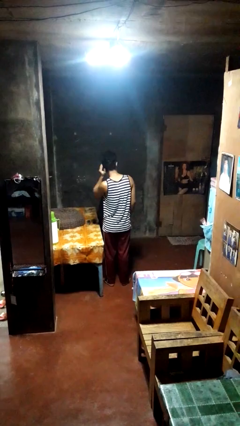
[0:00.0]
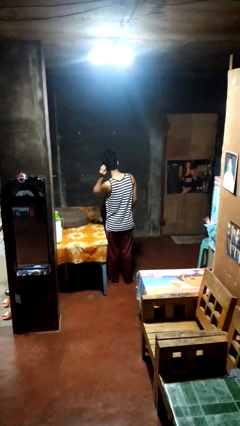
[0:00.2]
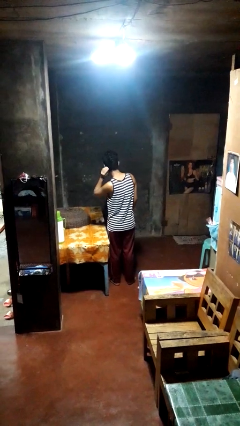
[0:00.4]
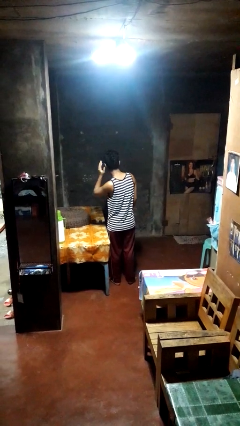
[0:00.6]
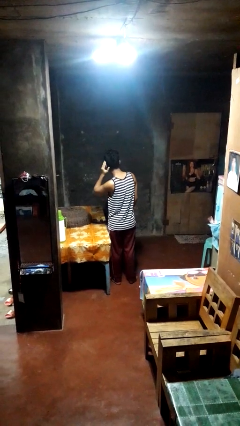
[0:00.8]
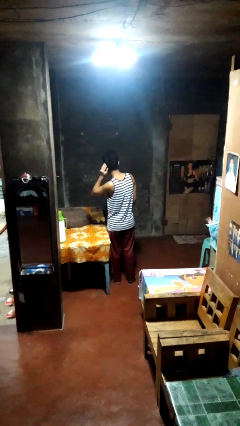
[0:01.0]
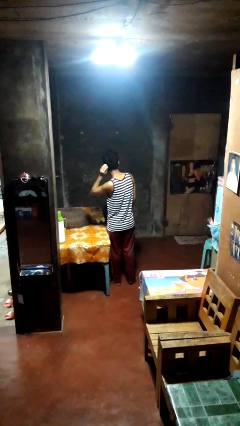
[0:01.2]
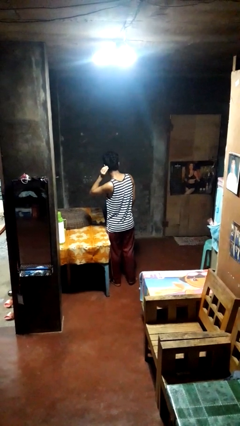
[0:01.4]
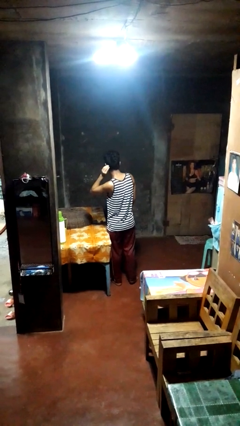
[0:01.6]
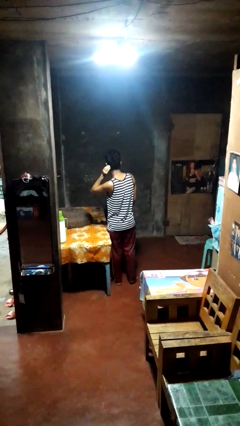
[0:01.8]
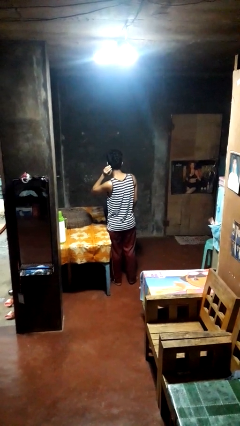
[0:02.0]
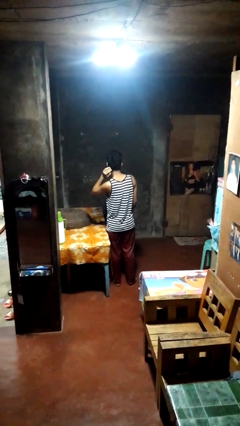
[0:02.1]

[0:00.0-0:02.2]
person strokes hair

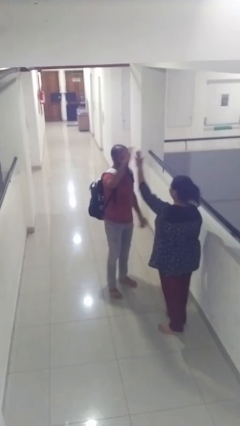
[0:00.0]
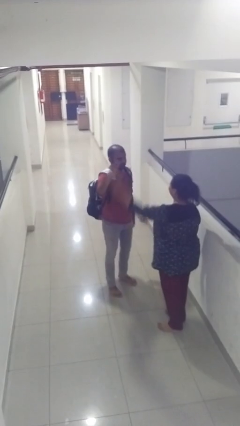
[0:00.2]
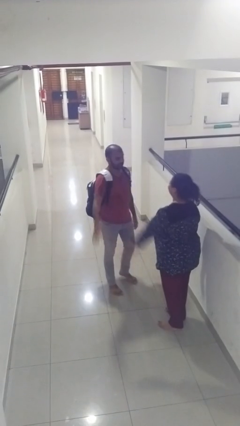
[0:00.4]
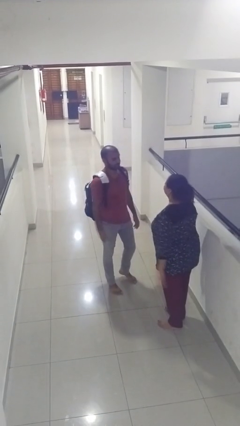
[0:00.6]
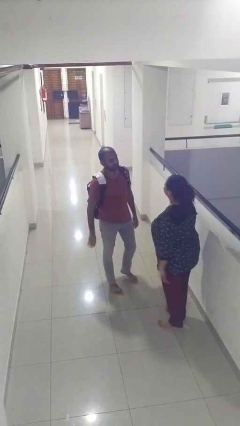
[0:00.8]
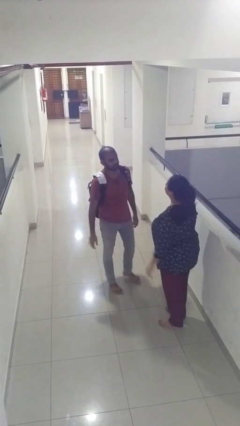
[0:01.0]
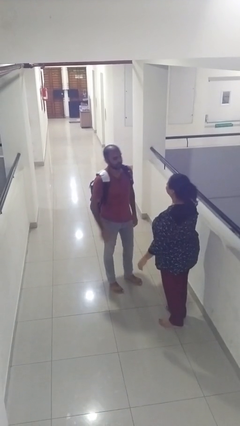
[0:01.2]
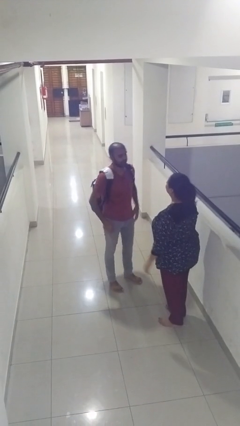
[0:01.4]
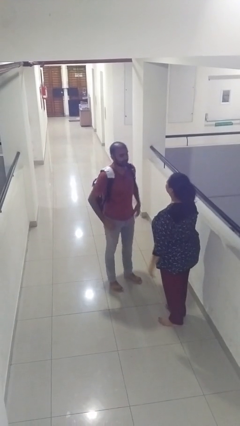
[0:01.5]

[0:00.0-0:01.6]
person highfives hand

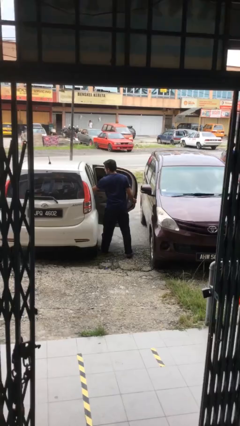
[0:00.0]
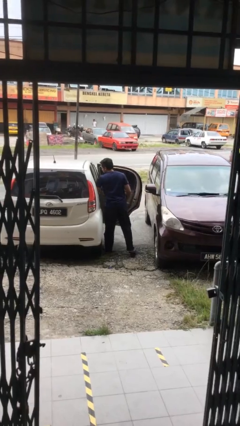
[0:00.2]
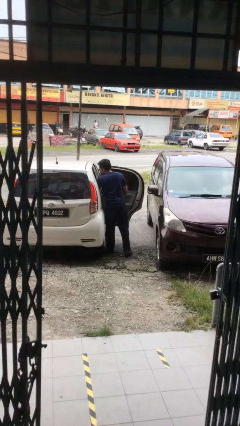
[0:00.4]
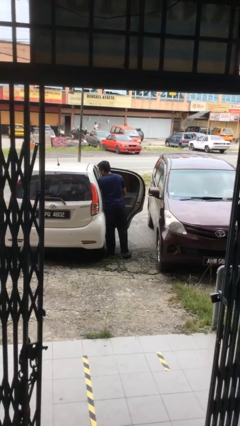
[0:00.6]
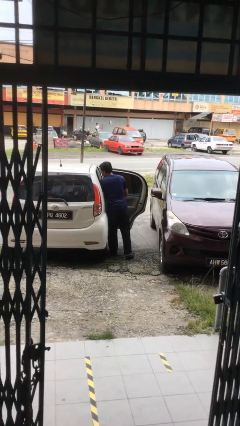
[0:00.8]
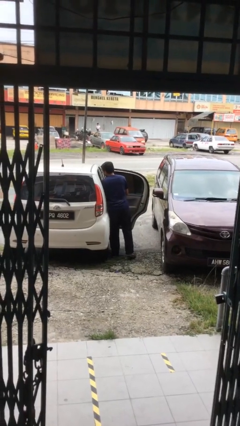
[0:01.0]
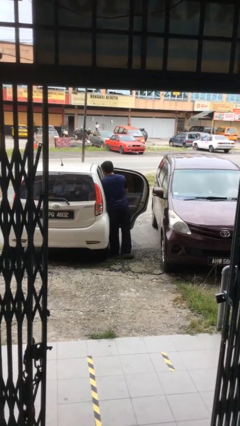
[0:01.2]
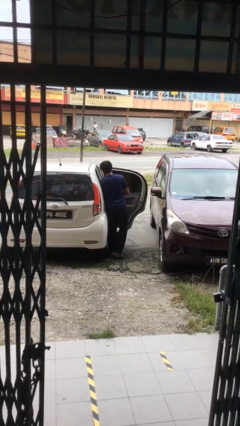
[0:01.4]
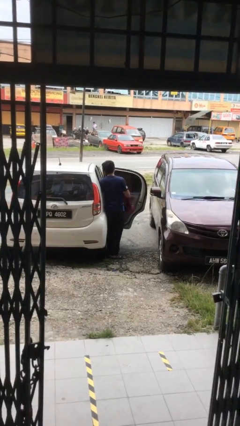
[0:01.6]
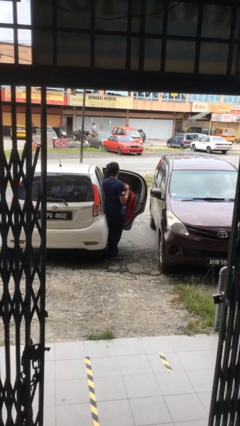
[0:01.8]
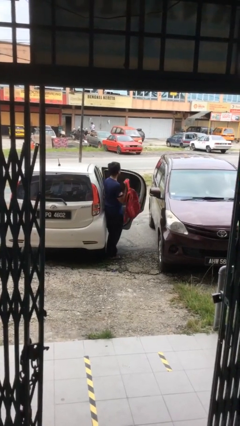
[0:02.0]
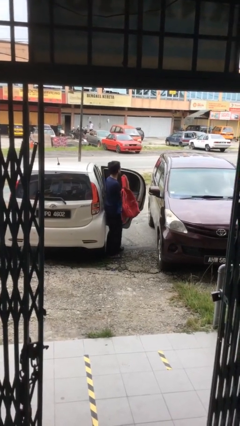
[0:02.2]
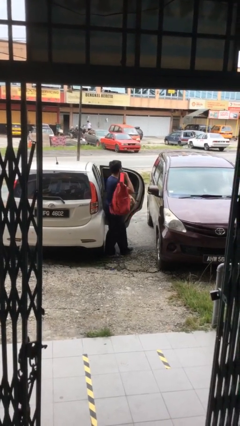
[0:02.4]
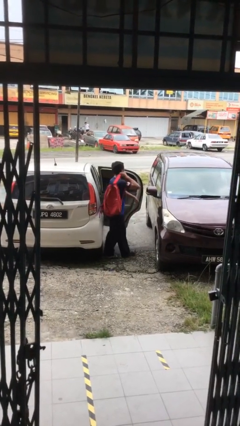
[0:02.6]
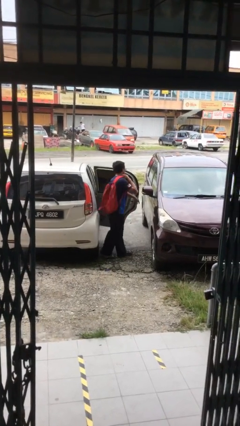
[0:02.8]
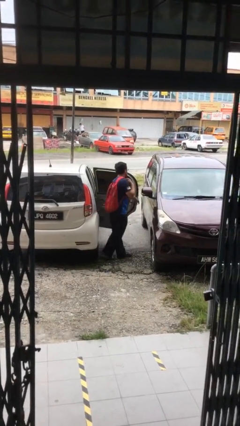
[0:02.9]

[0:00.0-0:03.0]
person unloads car

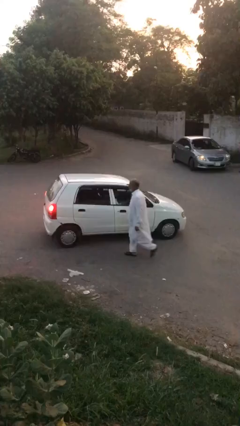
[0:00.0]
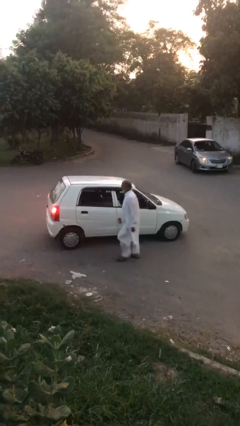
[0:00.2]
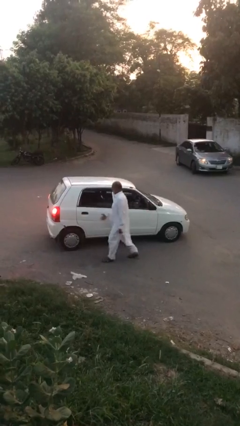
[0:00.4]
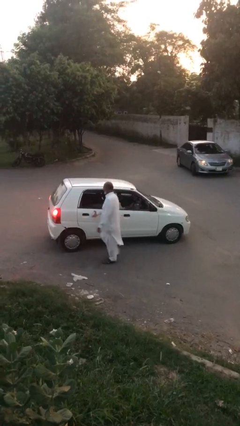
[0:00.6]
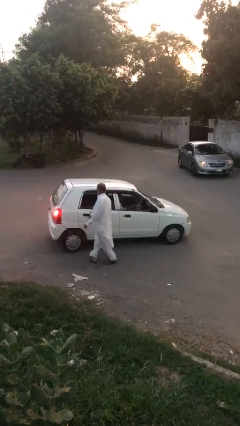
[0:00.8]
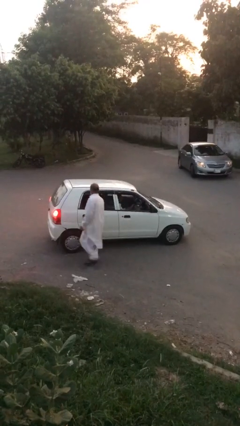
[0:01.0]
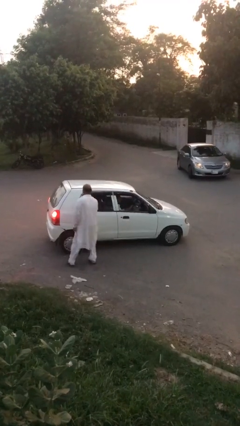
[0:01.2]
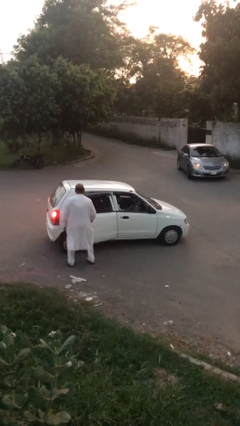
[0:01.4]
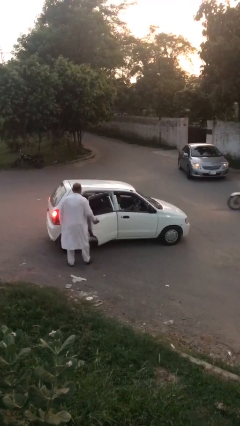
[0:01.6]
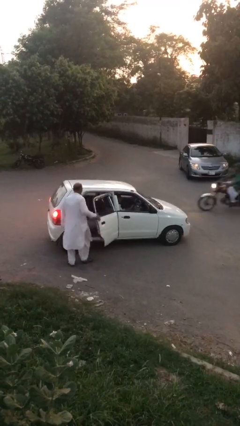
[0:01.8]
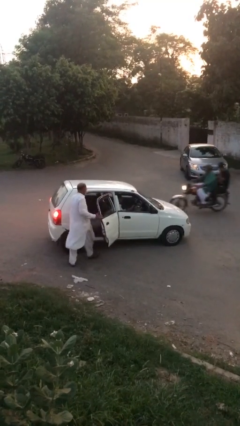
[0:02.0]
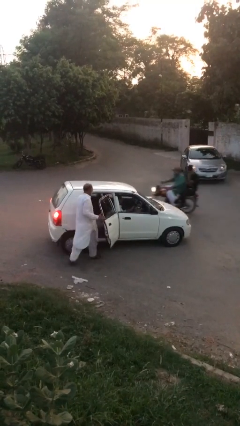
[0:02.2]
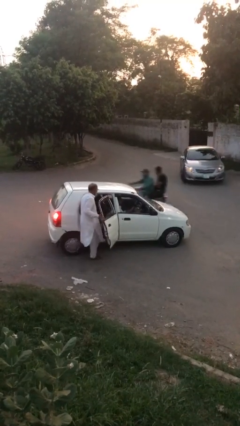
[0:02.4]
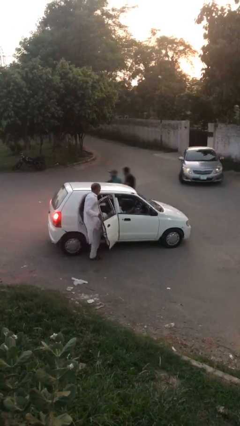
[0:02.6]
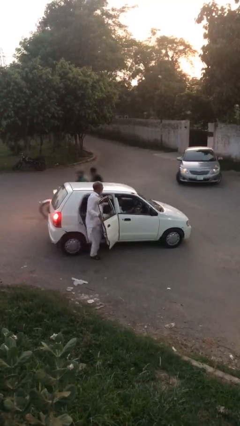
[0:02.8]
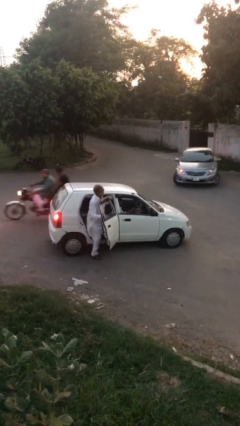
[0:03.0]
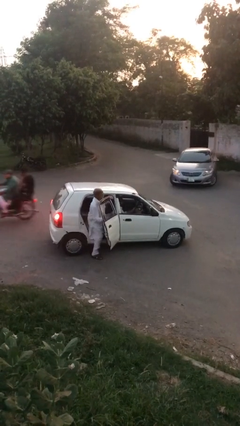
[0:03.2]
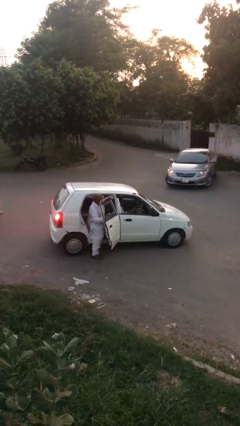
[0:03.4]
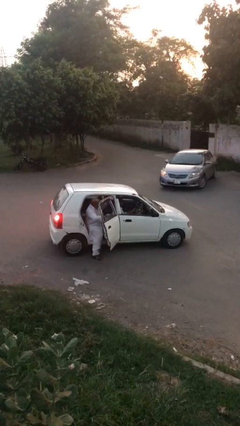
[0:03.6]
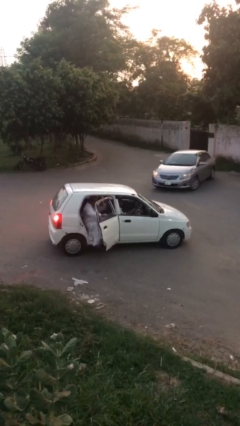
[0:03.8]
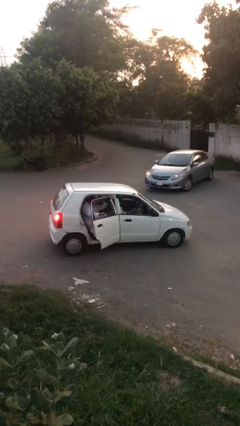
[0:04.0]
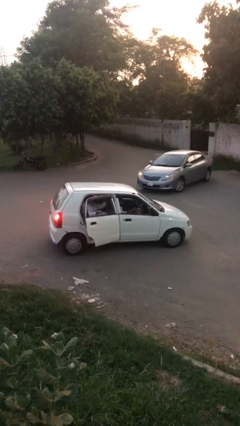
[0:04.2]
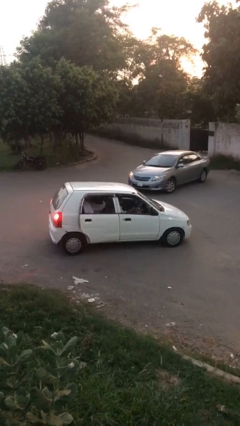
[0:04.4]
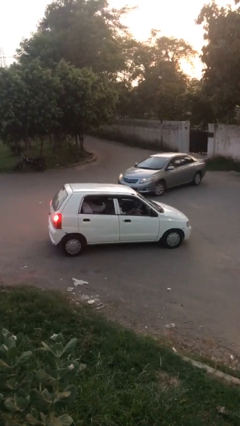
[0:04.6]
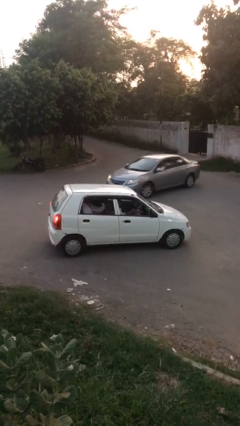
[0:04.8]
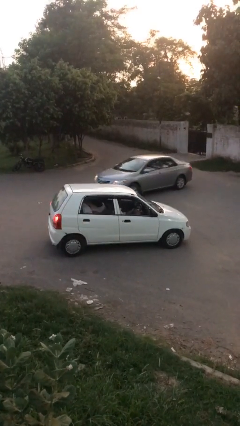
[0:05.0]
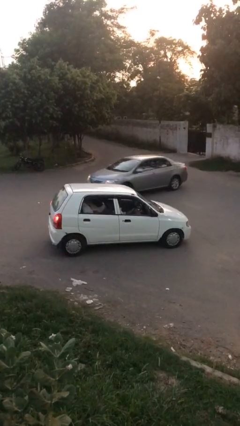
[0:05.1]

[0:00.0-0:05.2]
car picks up person

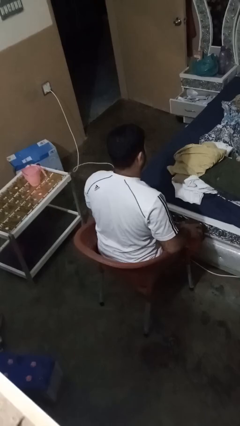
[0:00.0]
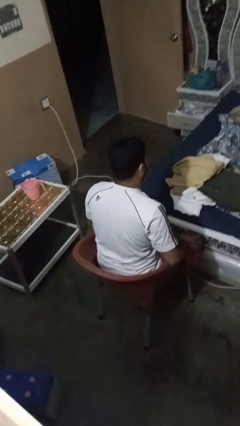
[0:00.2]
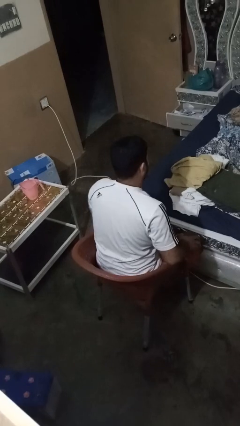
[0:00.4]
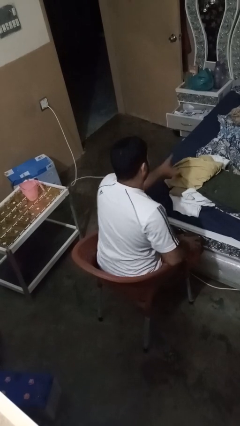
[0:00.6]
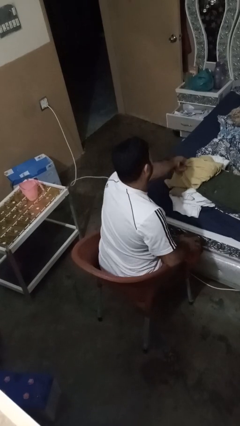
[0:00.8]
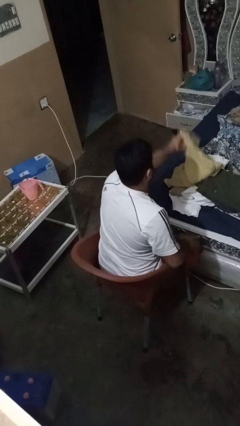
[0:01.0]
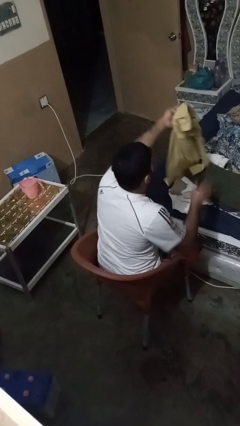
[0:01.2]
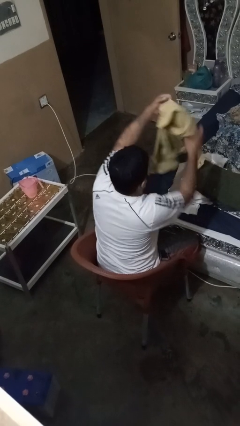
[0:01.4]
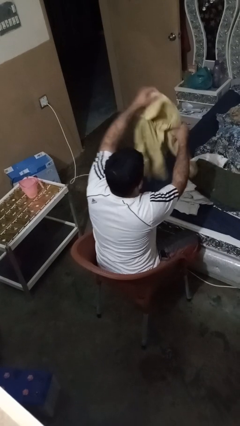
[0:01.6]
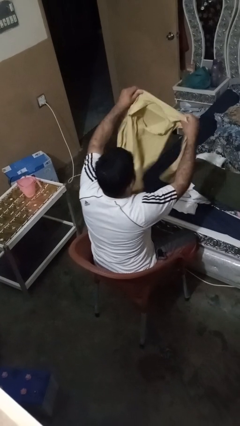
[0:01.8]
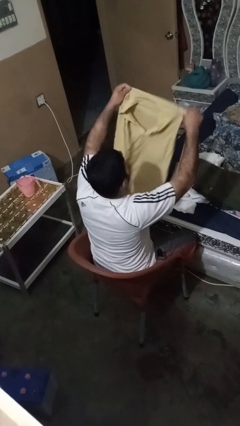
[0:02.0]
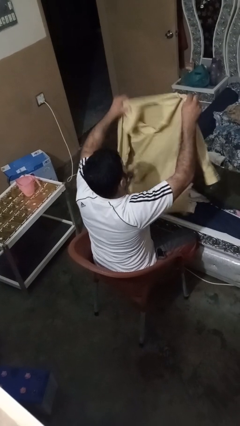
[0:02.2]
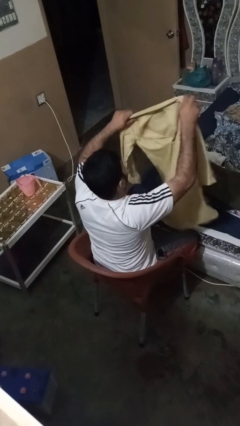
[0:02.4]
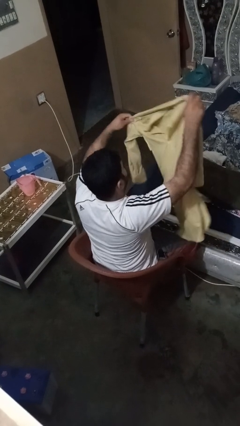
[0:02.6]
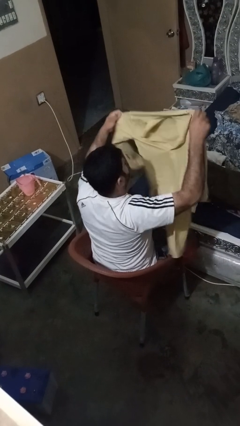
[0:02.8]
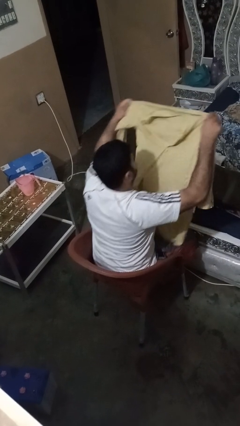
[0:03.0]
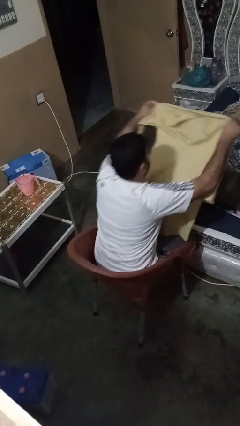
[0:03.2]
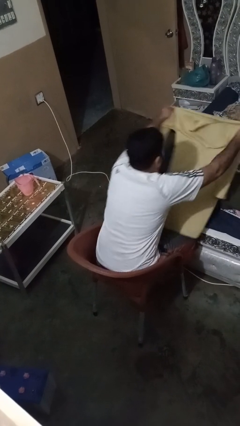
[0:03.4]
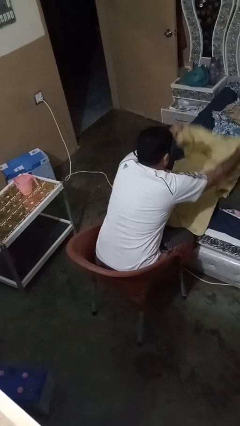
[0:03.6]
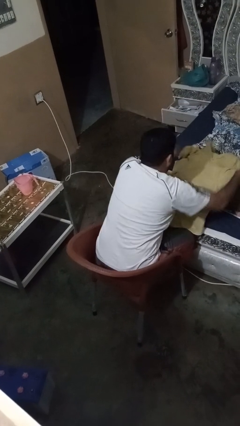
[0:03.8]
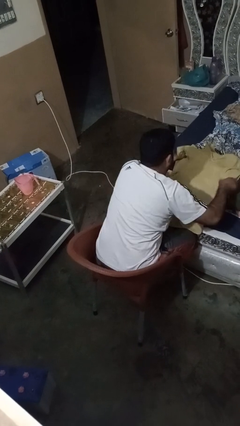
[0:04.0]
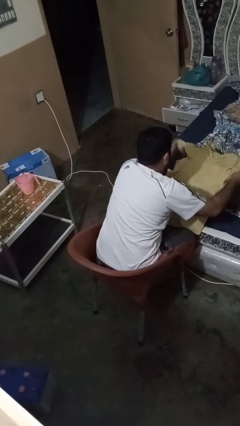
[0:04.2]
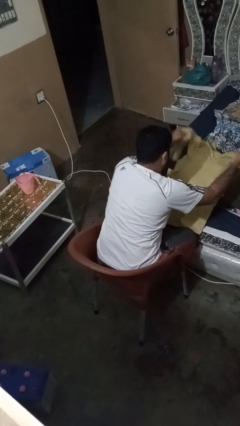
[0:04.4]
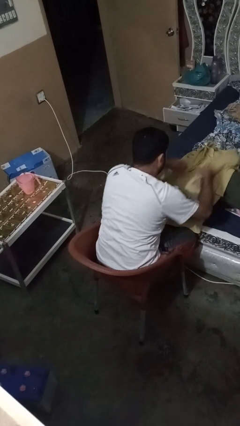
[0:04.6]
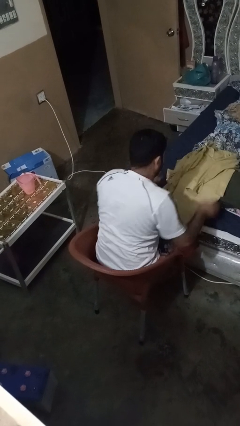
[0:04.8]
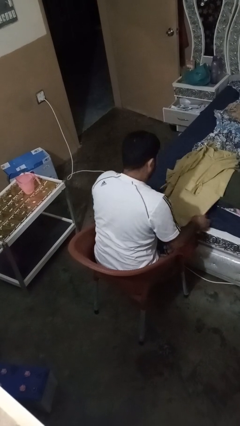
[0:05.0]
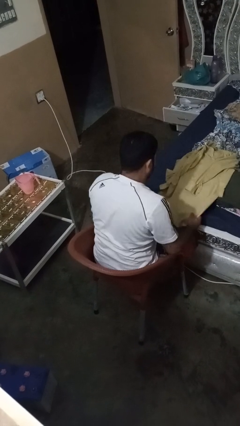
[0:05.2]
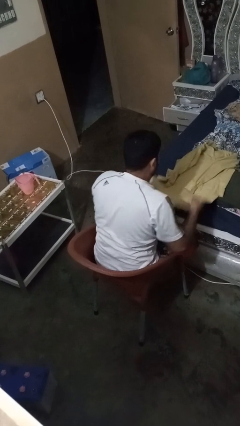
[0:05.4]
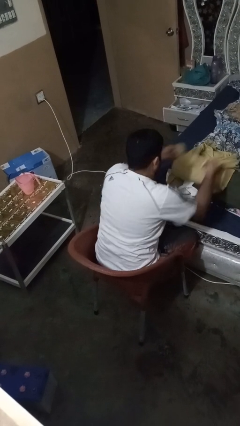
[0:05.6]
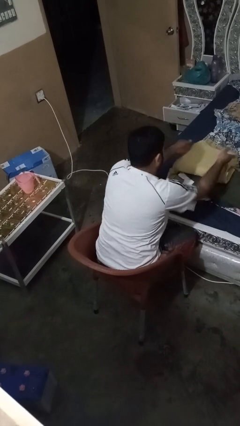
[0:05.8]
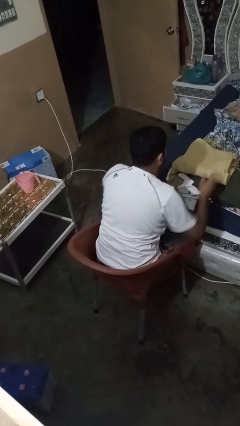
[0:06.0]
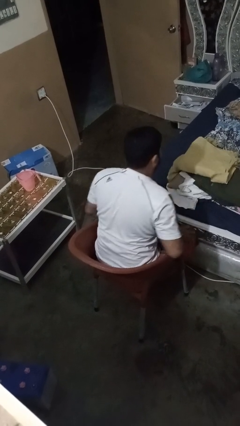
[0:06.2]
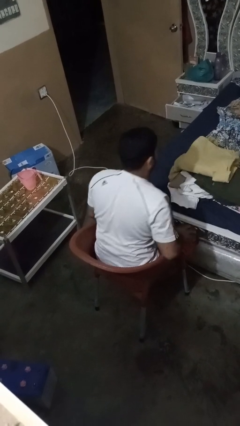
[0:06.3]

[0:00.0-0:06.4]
person folds shirt
